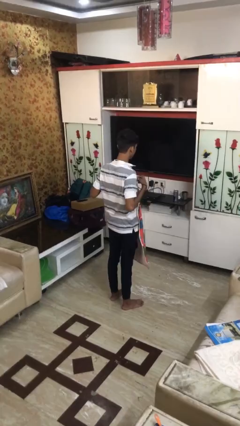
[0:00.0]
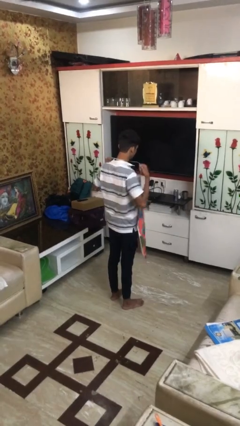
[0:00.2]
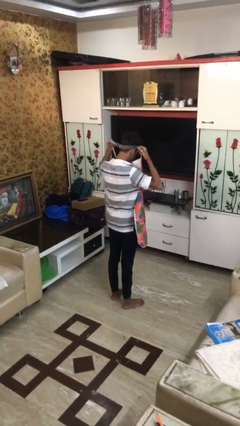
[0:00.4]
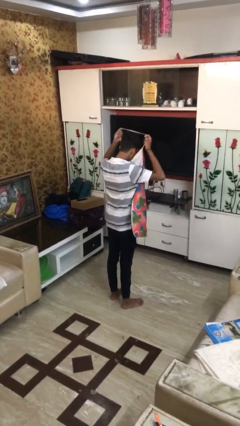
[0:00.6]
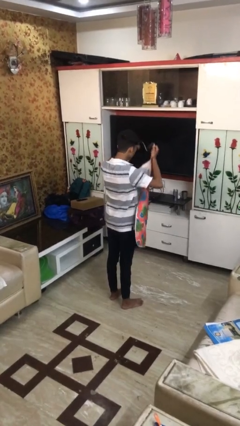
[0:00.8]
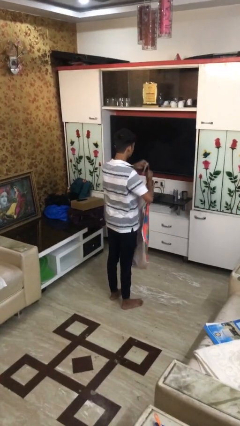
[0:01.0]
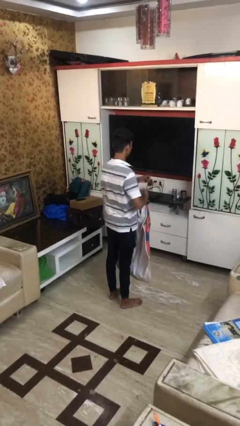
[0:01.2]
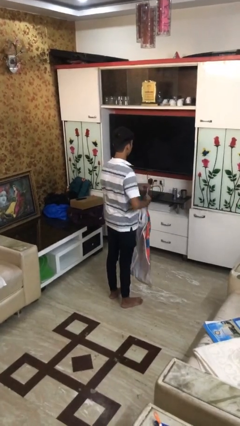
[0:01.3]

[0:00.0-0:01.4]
person takes off apron

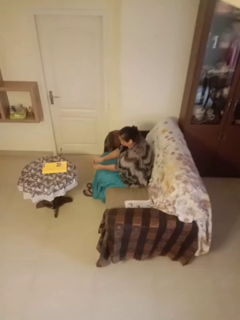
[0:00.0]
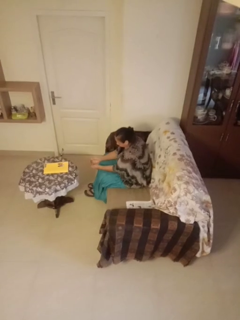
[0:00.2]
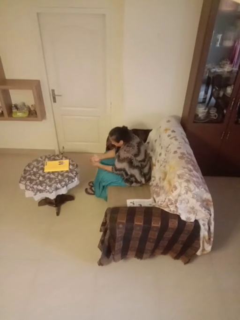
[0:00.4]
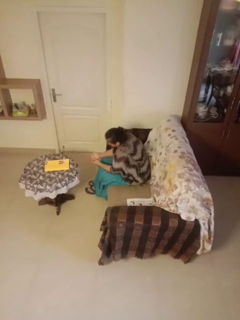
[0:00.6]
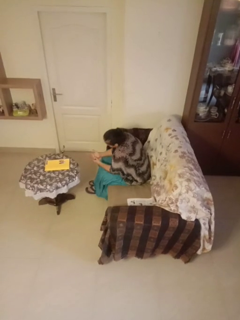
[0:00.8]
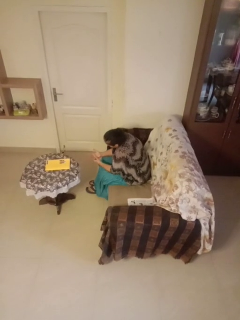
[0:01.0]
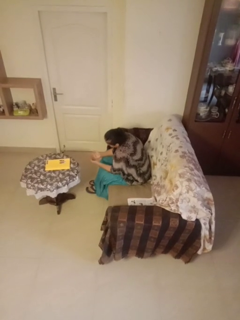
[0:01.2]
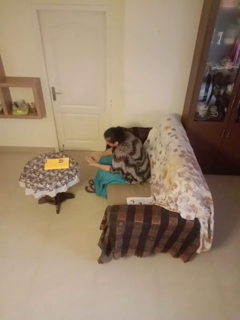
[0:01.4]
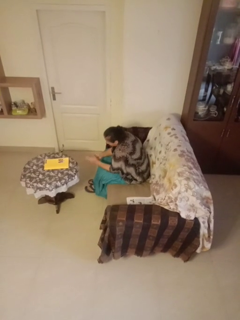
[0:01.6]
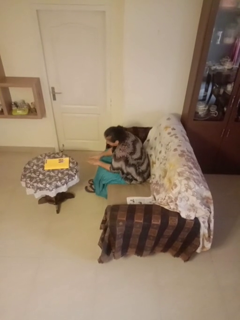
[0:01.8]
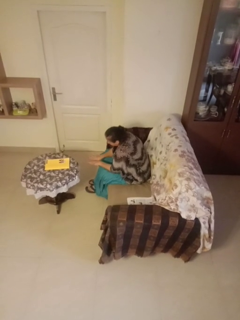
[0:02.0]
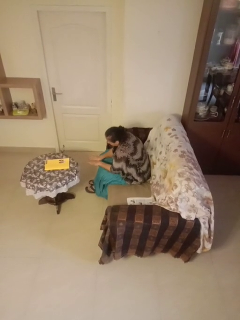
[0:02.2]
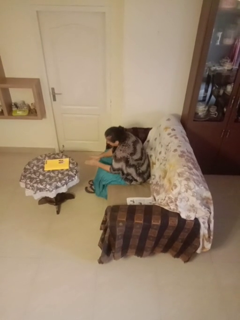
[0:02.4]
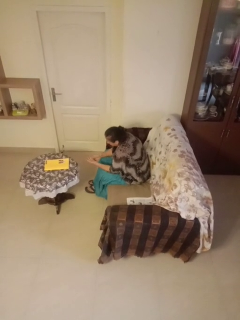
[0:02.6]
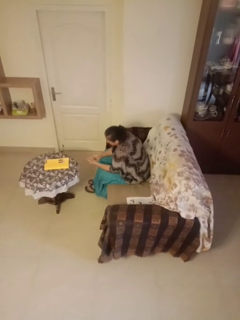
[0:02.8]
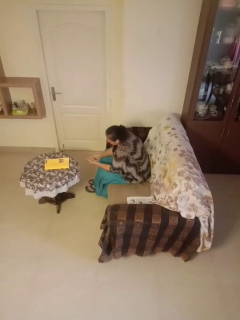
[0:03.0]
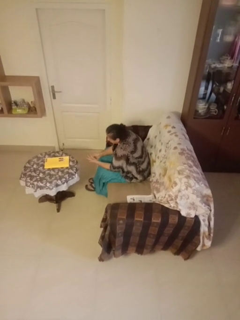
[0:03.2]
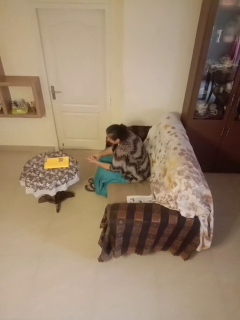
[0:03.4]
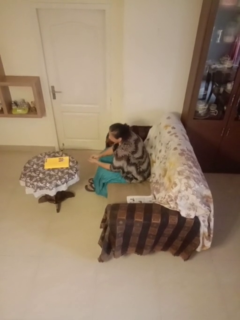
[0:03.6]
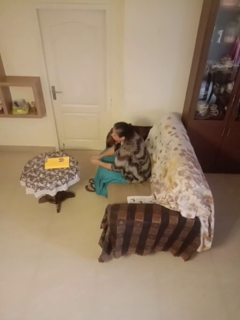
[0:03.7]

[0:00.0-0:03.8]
person looks at hands in lap

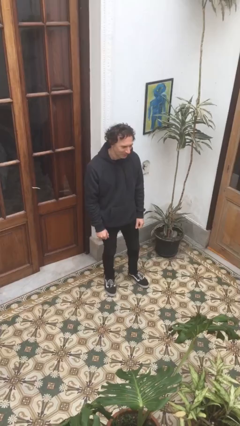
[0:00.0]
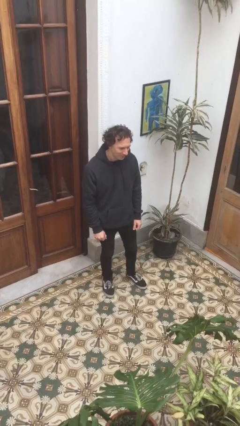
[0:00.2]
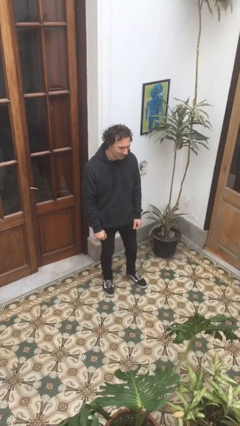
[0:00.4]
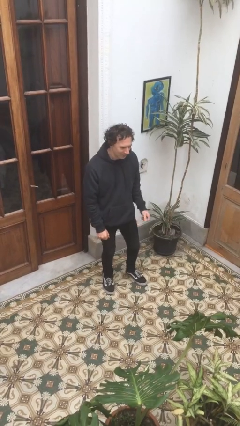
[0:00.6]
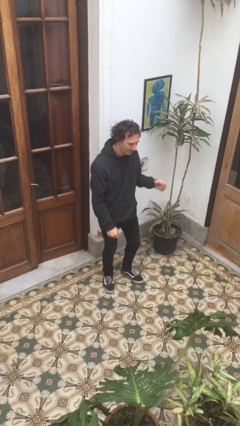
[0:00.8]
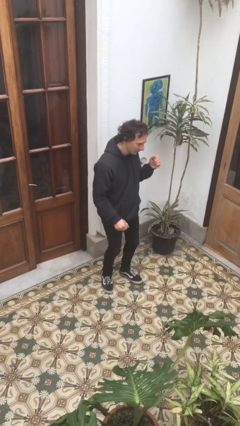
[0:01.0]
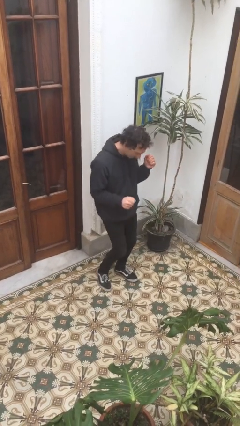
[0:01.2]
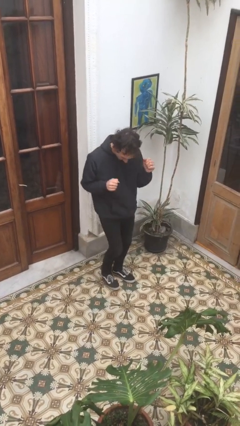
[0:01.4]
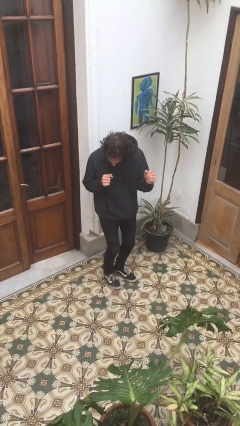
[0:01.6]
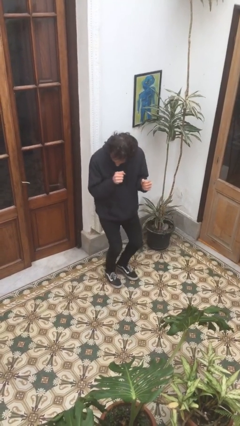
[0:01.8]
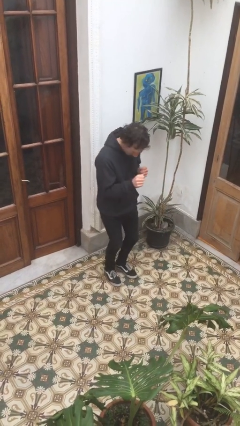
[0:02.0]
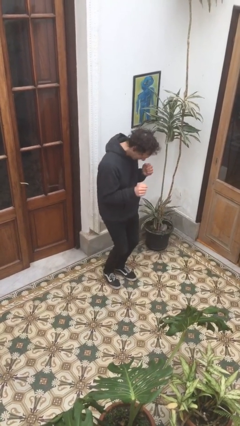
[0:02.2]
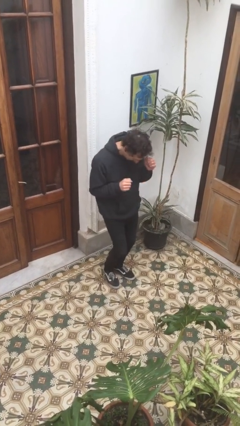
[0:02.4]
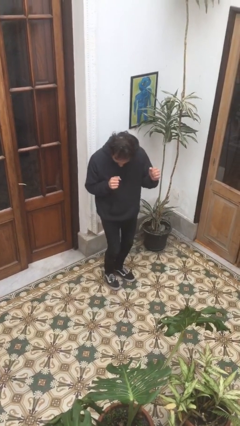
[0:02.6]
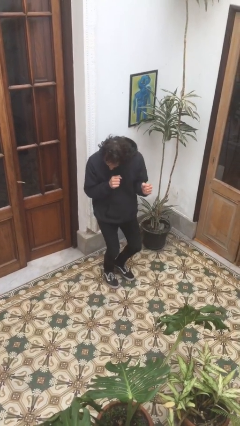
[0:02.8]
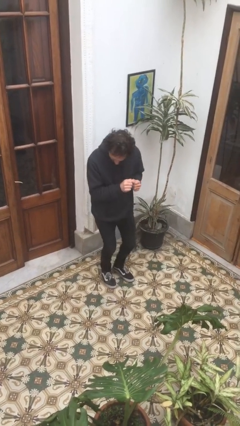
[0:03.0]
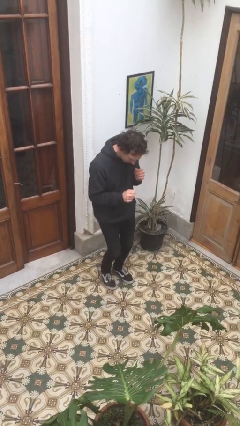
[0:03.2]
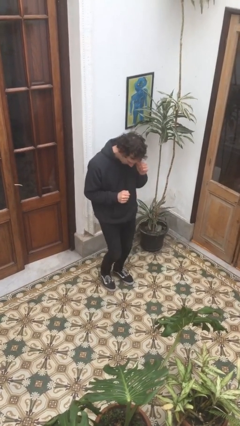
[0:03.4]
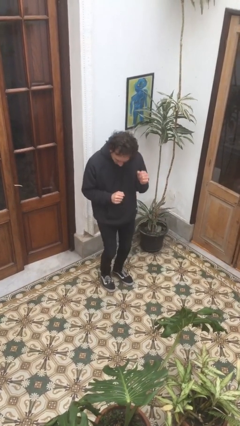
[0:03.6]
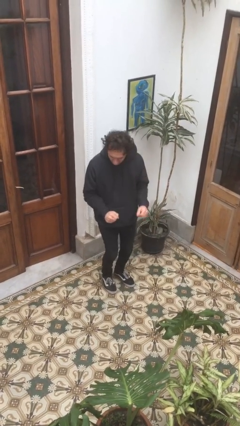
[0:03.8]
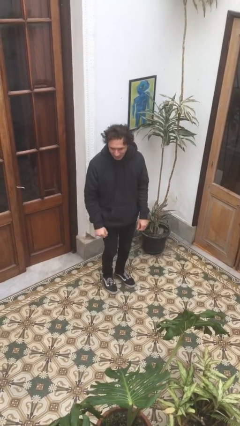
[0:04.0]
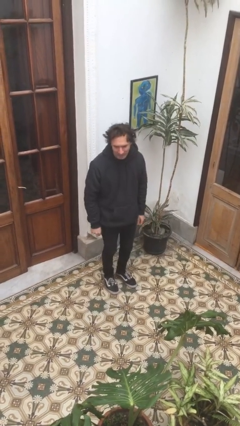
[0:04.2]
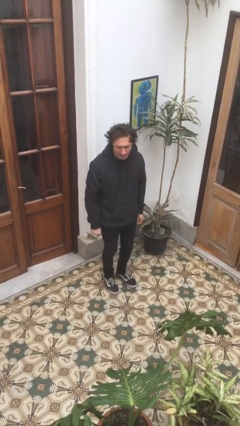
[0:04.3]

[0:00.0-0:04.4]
person dances in place

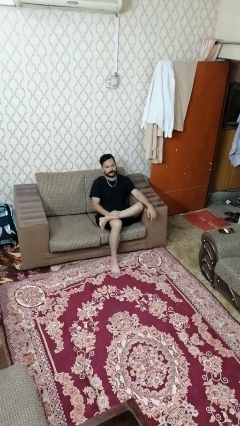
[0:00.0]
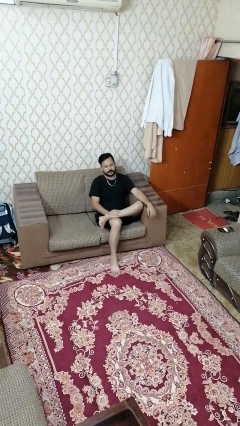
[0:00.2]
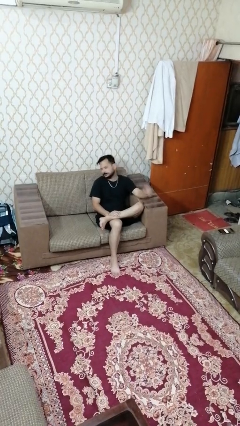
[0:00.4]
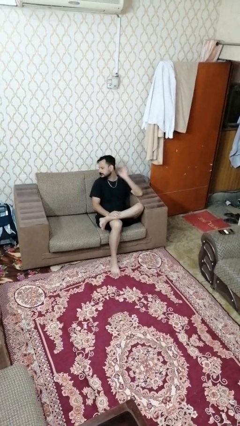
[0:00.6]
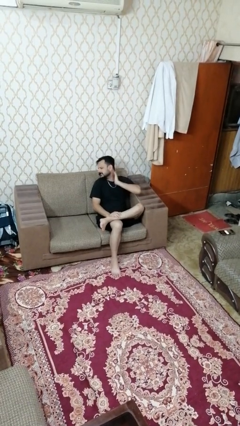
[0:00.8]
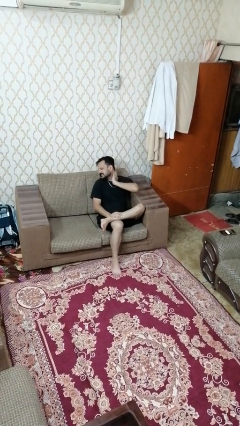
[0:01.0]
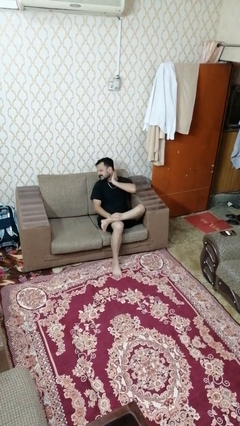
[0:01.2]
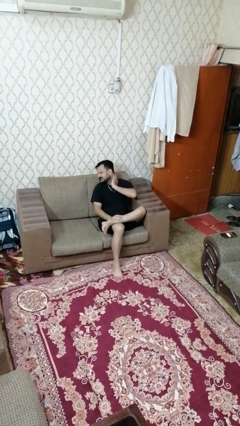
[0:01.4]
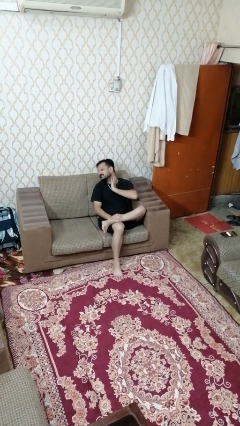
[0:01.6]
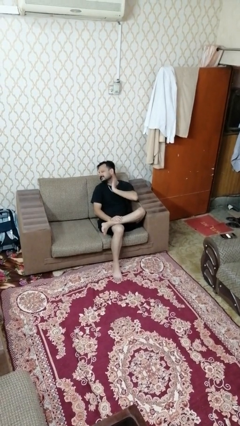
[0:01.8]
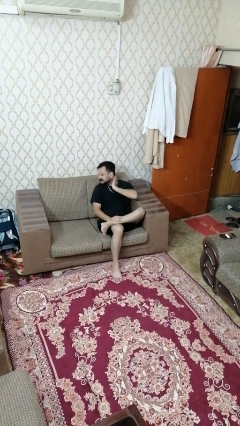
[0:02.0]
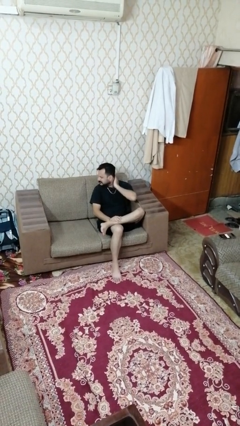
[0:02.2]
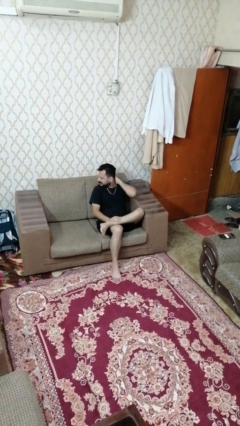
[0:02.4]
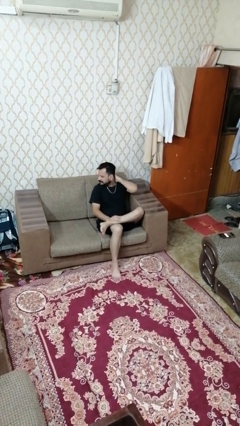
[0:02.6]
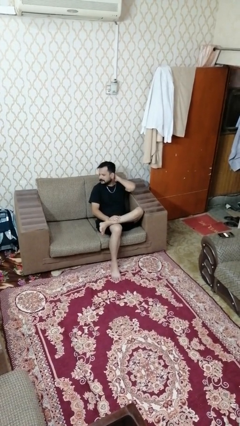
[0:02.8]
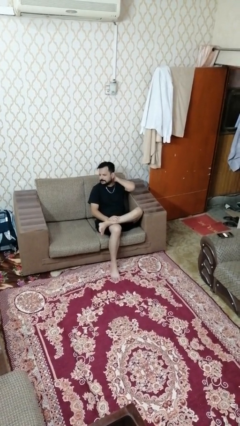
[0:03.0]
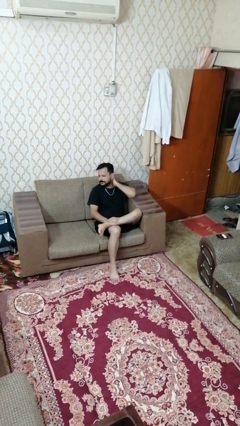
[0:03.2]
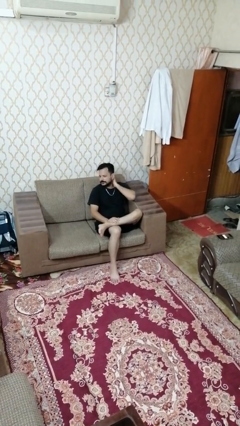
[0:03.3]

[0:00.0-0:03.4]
person rubs neck

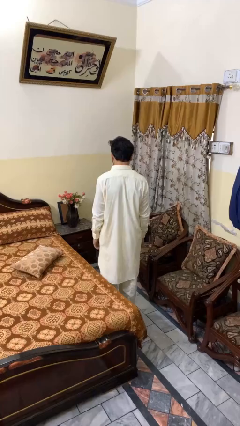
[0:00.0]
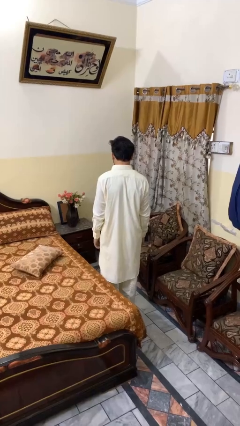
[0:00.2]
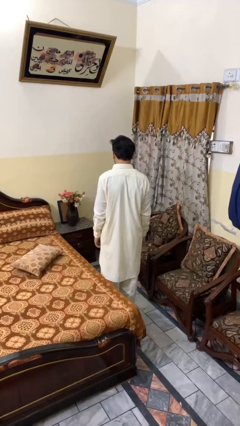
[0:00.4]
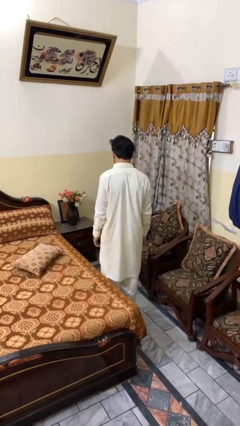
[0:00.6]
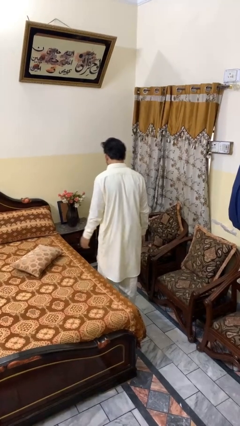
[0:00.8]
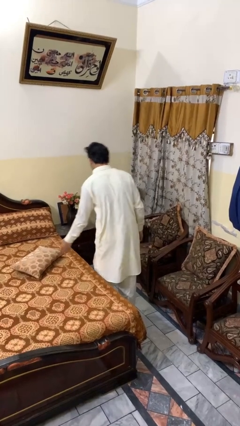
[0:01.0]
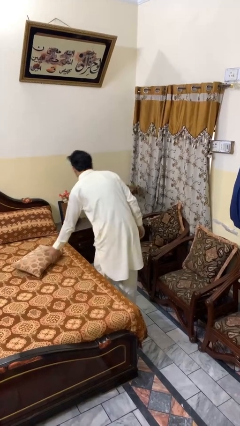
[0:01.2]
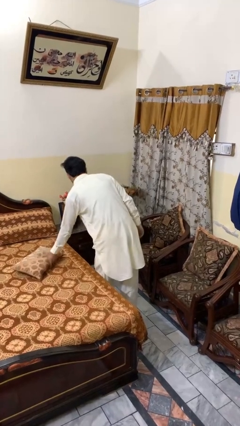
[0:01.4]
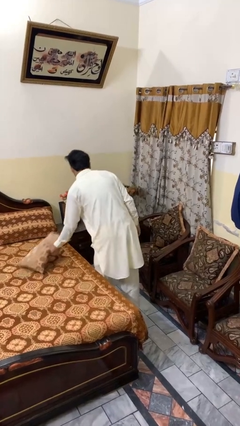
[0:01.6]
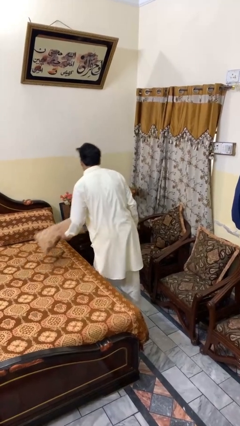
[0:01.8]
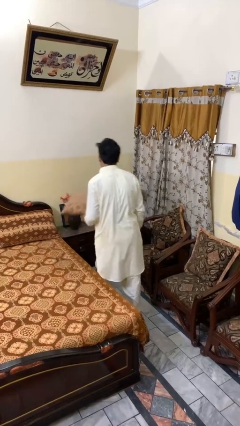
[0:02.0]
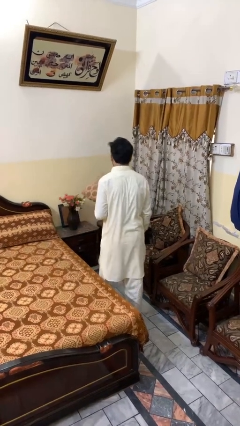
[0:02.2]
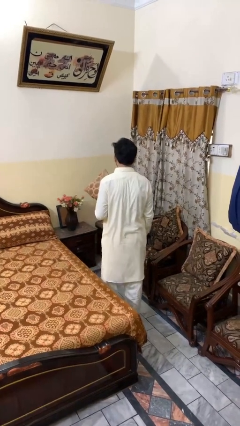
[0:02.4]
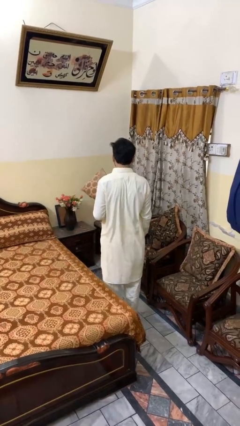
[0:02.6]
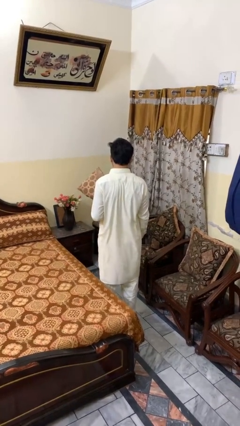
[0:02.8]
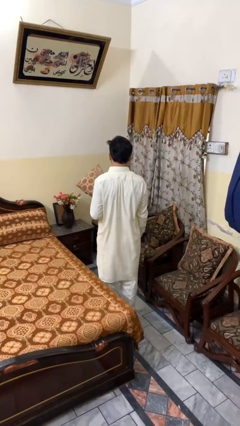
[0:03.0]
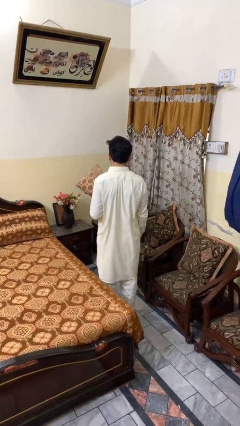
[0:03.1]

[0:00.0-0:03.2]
person picks up object from bed

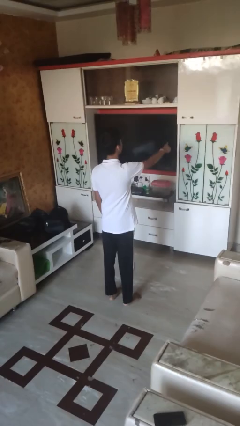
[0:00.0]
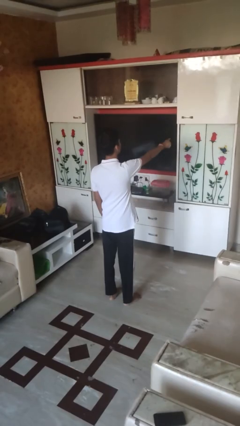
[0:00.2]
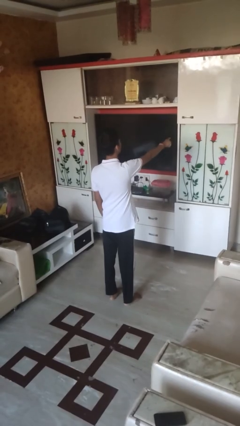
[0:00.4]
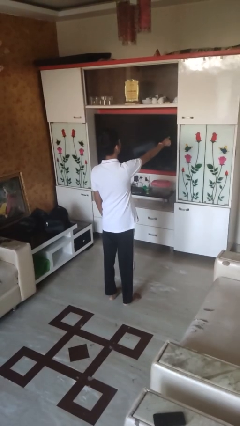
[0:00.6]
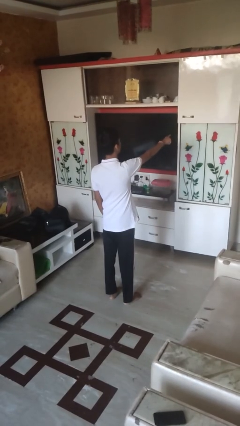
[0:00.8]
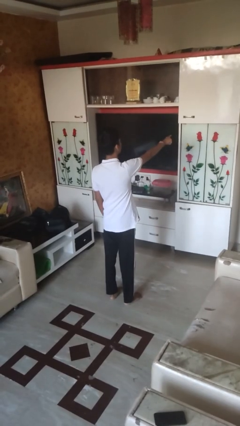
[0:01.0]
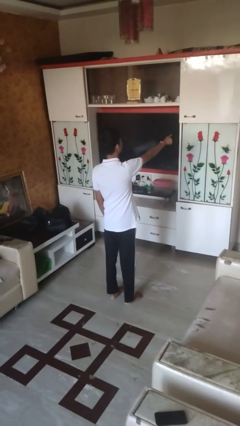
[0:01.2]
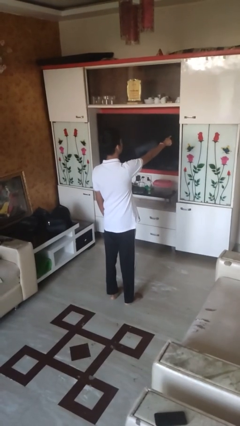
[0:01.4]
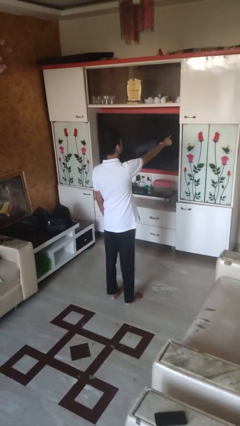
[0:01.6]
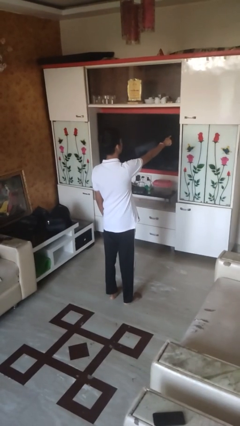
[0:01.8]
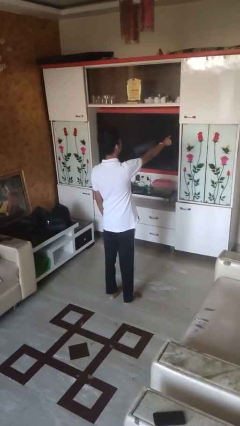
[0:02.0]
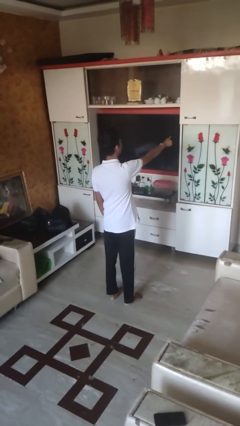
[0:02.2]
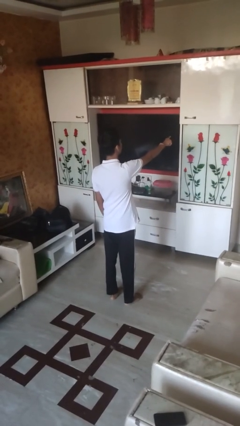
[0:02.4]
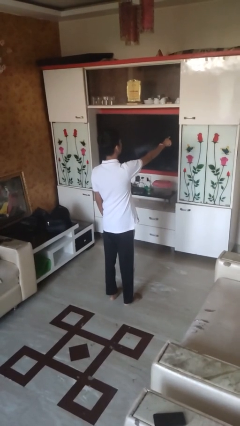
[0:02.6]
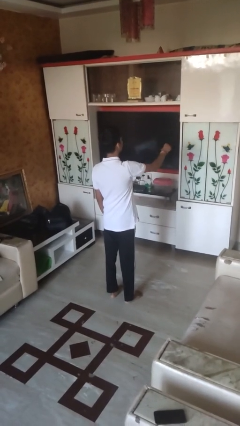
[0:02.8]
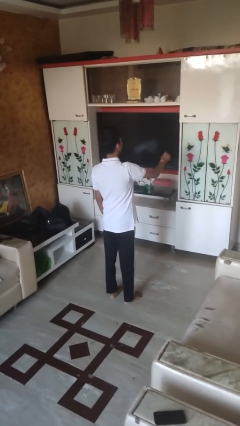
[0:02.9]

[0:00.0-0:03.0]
person points at person
